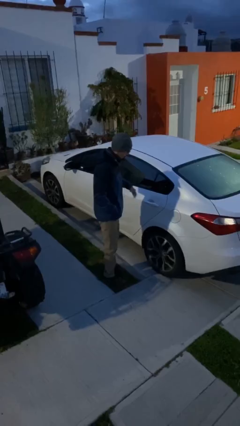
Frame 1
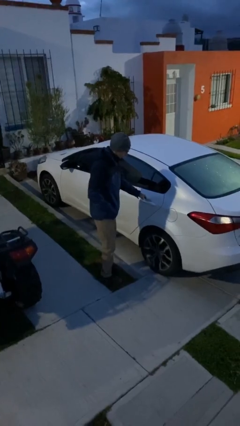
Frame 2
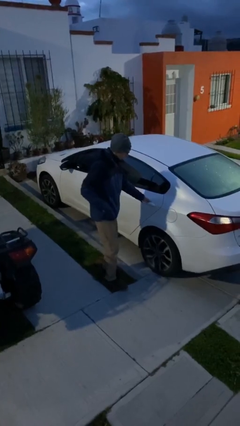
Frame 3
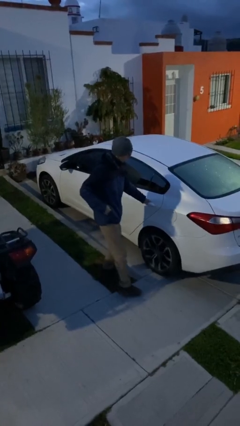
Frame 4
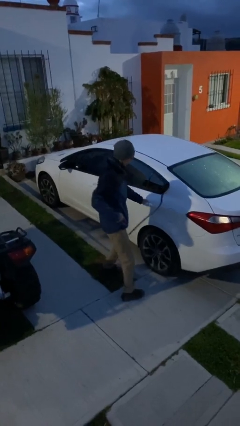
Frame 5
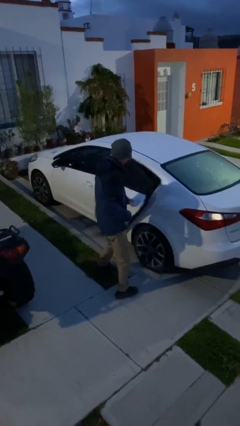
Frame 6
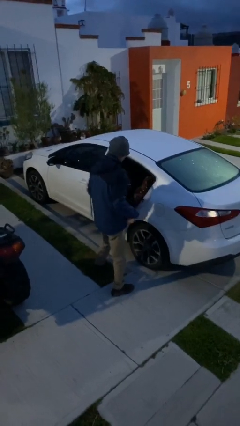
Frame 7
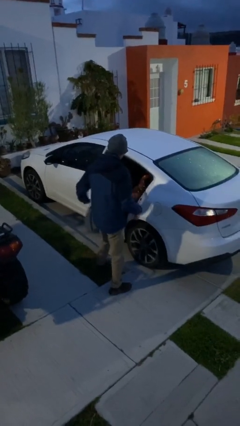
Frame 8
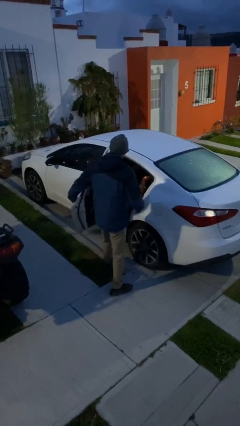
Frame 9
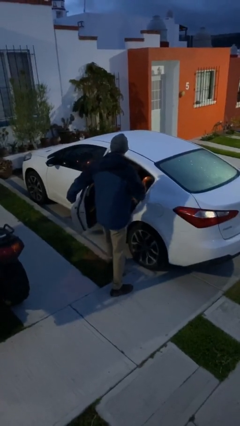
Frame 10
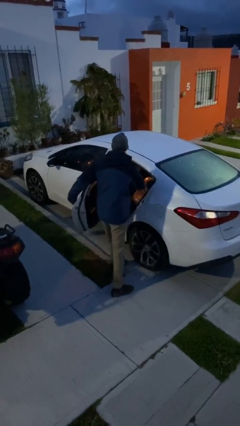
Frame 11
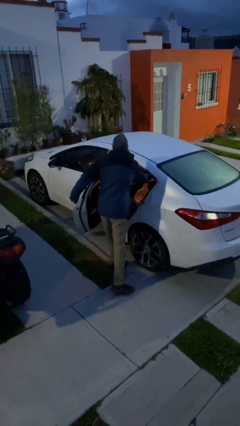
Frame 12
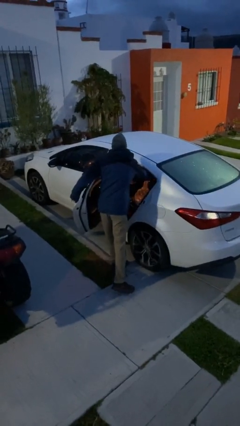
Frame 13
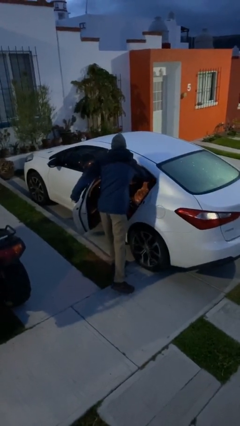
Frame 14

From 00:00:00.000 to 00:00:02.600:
person opens car door

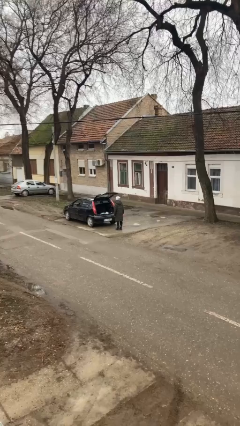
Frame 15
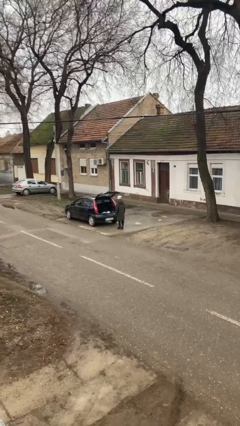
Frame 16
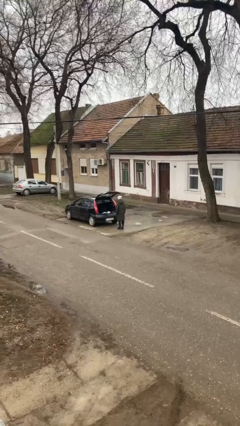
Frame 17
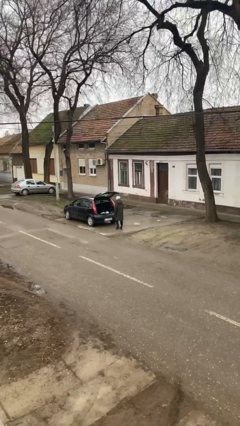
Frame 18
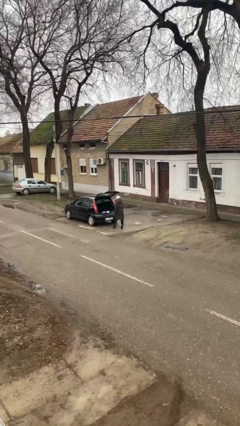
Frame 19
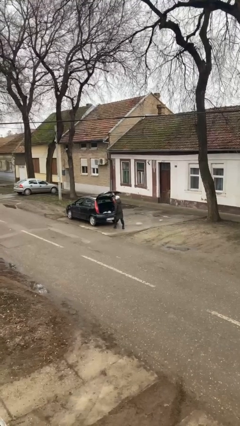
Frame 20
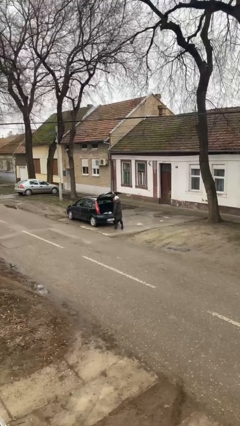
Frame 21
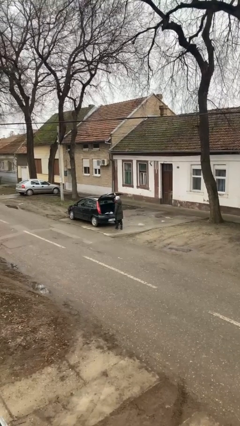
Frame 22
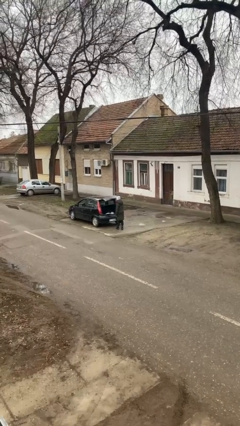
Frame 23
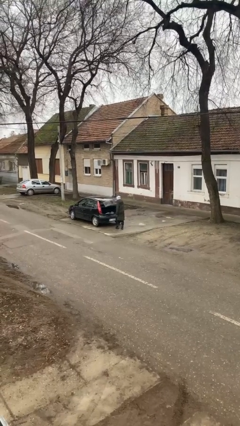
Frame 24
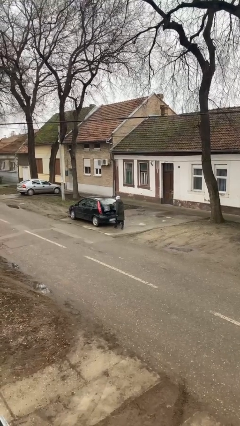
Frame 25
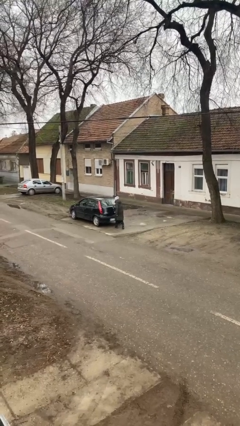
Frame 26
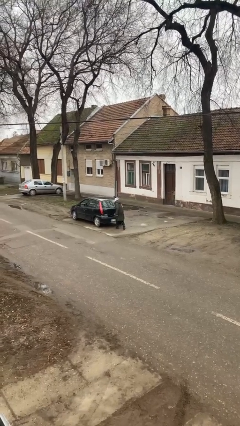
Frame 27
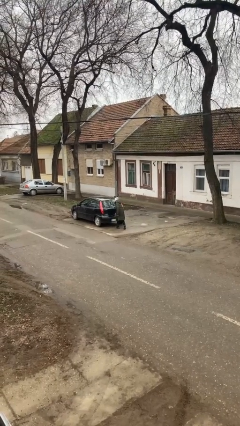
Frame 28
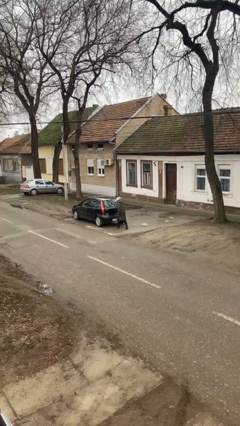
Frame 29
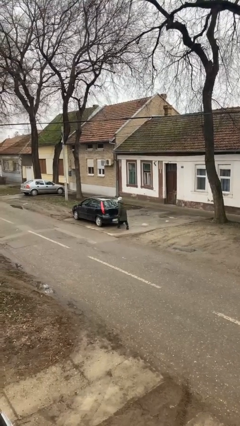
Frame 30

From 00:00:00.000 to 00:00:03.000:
person closes car trunk

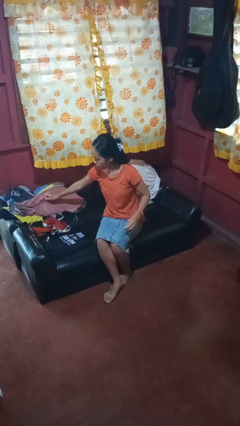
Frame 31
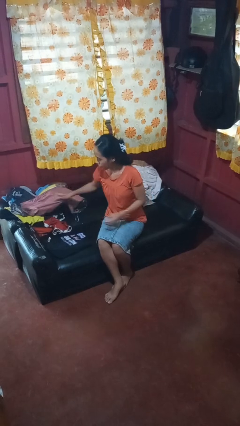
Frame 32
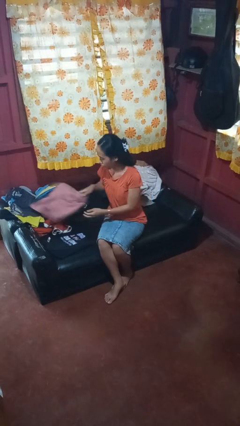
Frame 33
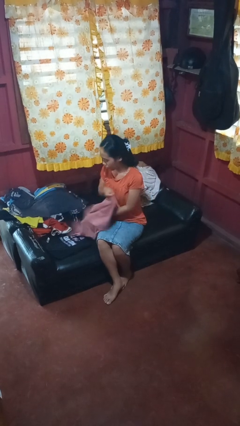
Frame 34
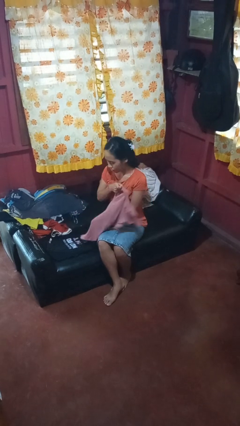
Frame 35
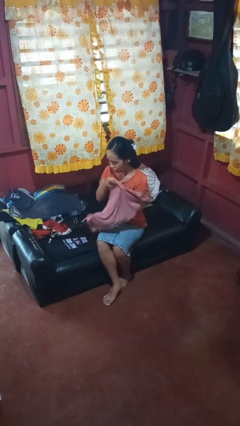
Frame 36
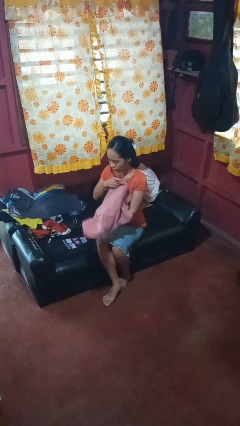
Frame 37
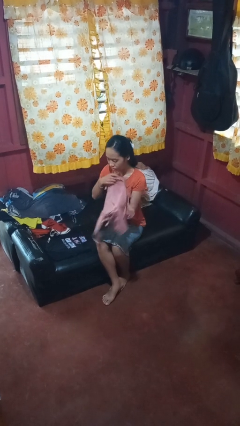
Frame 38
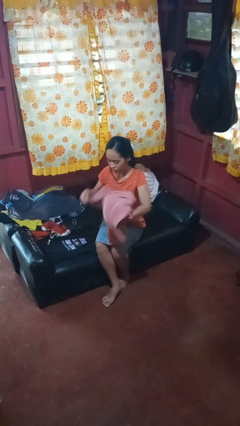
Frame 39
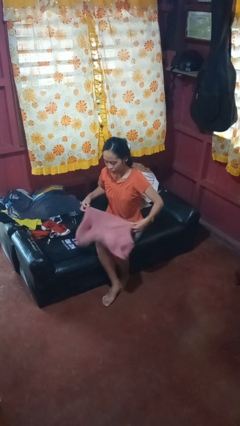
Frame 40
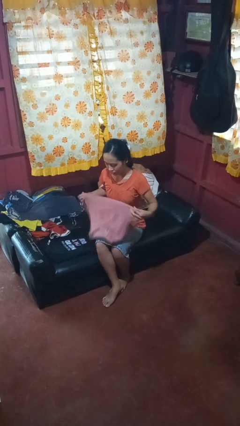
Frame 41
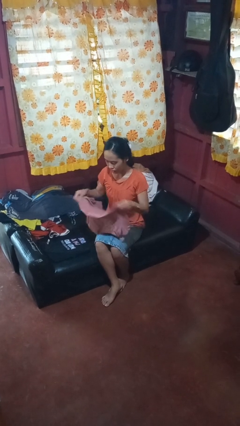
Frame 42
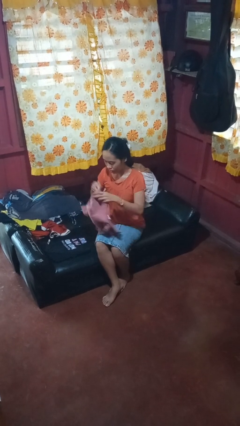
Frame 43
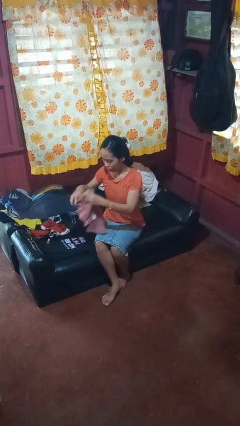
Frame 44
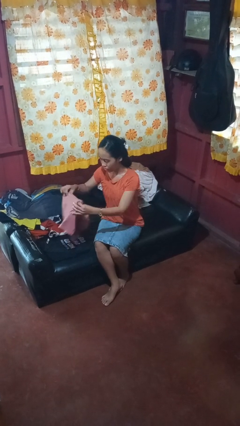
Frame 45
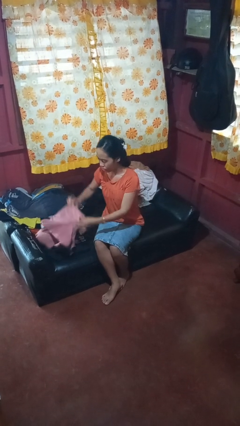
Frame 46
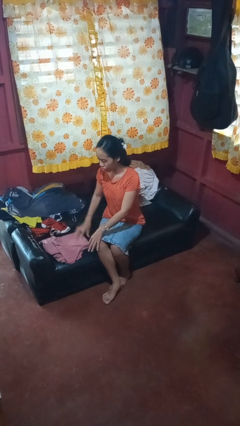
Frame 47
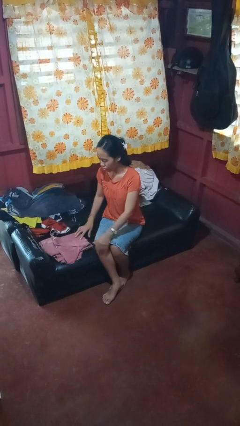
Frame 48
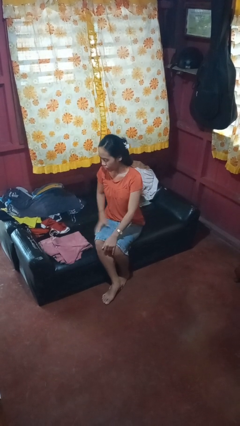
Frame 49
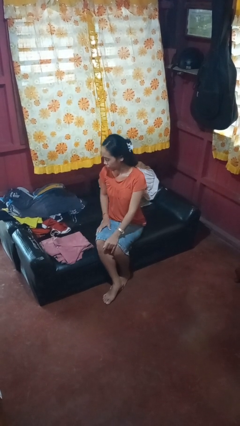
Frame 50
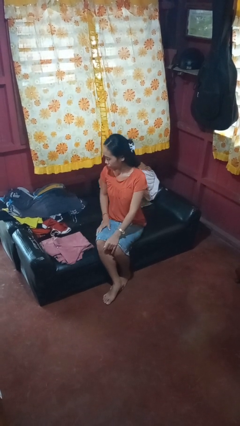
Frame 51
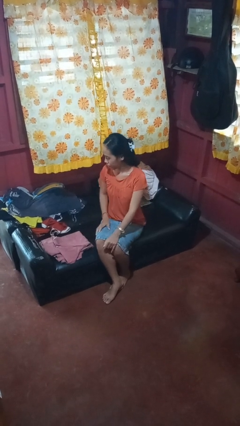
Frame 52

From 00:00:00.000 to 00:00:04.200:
person folds shirt

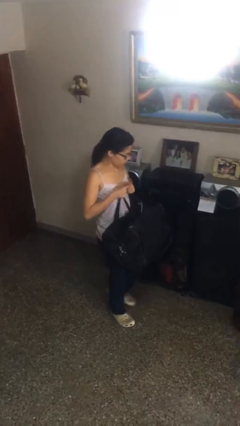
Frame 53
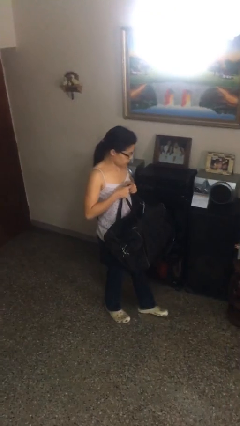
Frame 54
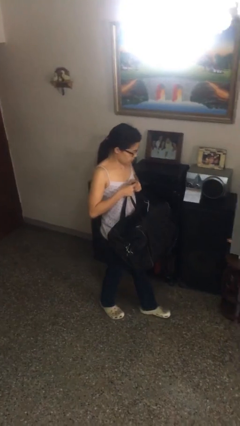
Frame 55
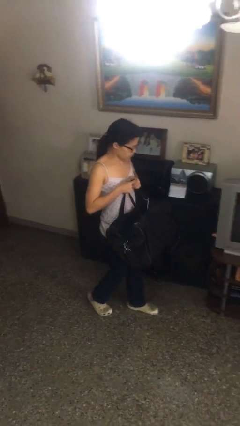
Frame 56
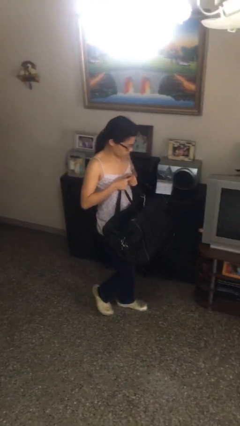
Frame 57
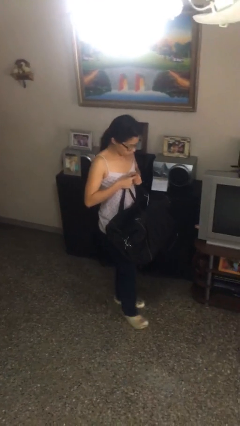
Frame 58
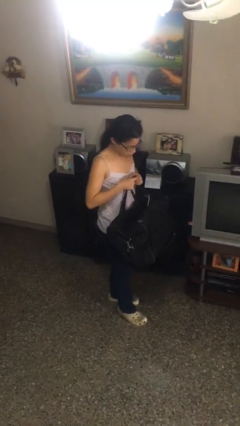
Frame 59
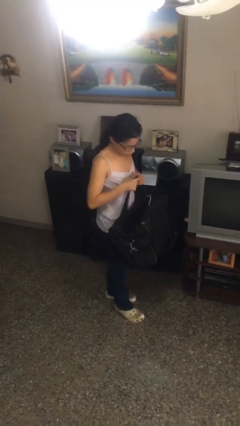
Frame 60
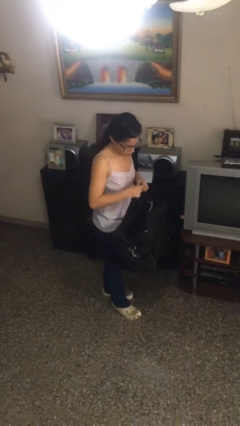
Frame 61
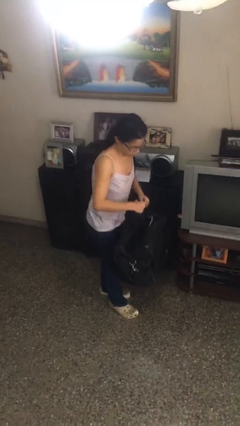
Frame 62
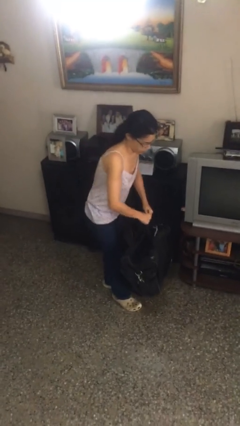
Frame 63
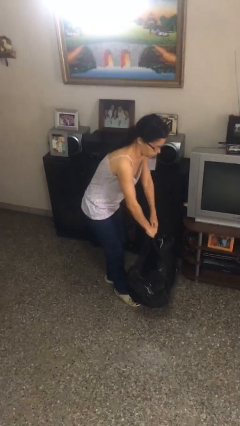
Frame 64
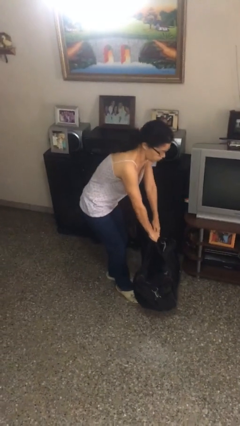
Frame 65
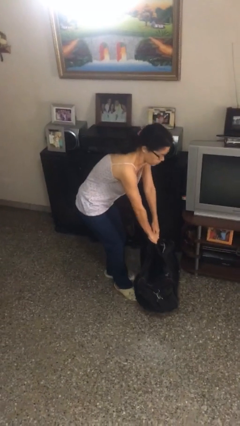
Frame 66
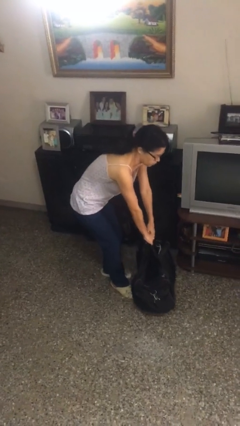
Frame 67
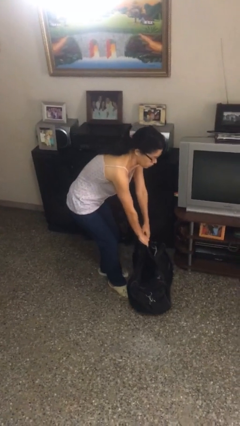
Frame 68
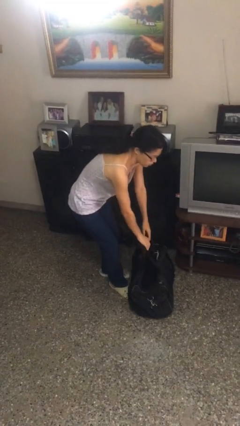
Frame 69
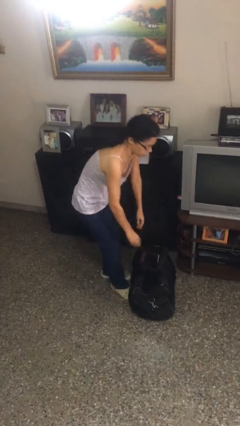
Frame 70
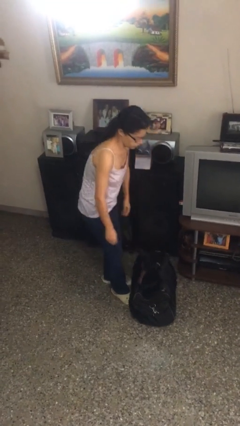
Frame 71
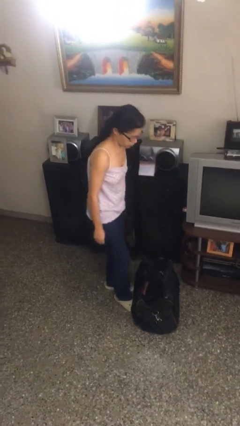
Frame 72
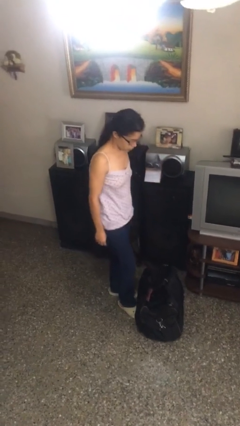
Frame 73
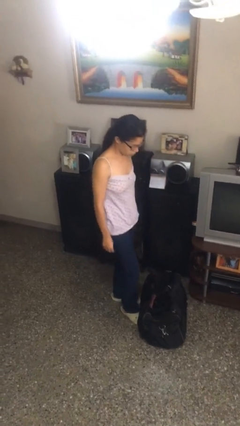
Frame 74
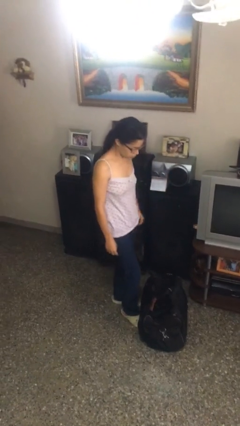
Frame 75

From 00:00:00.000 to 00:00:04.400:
person puts down object on floor

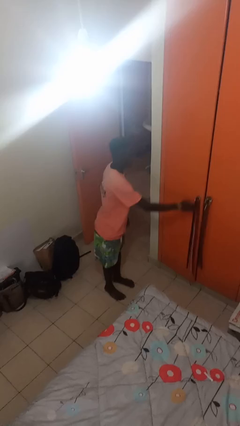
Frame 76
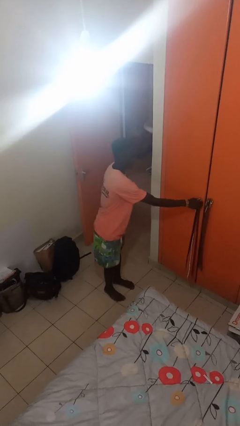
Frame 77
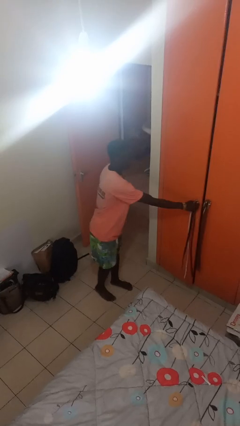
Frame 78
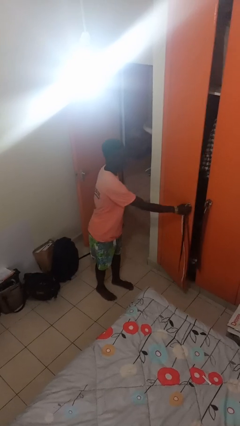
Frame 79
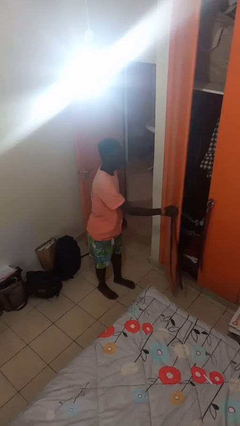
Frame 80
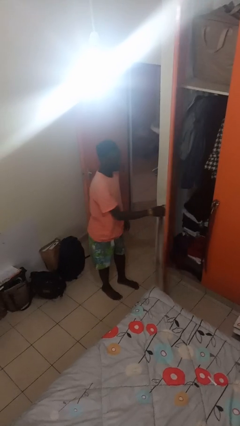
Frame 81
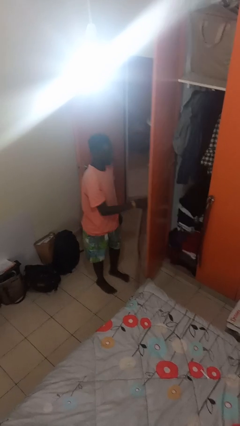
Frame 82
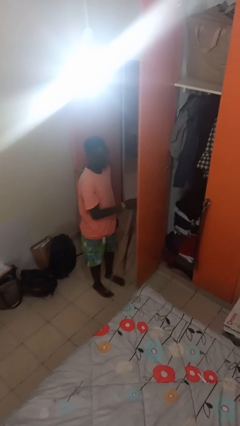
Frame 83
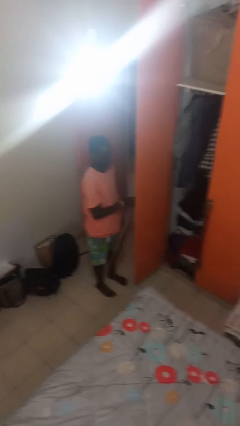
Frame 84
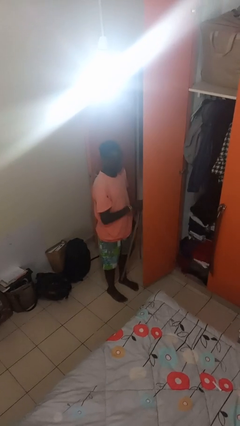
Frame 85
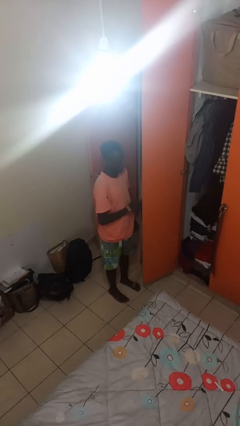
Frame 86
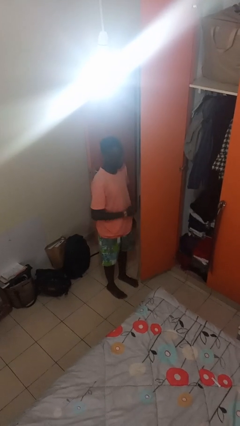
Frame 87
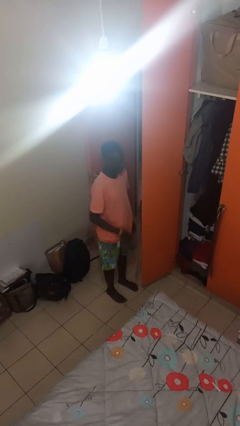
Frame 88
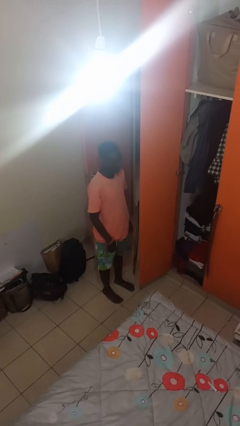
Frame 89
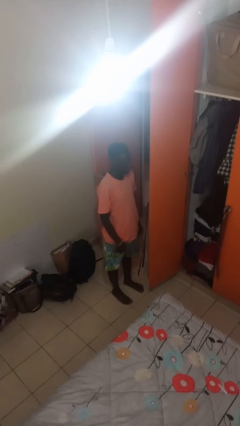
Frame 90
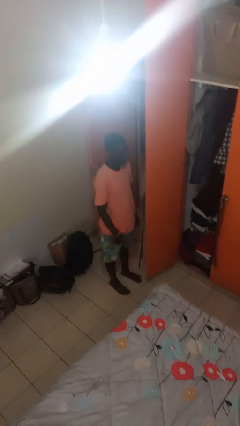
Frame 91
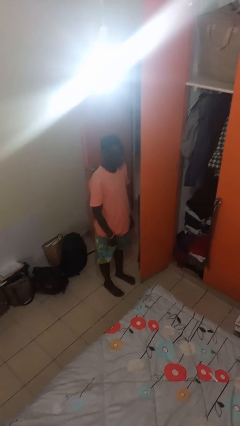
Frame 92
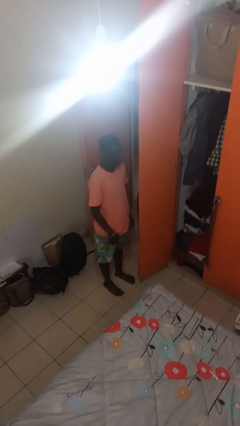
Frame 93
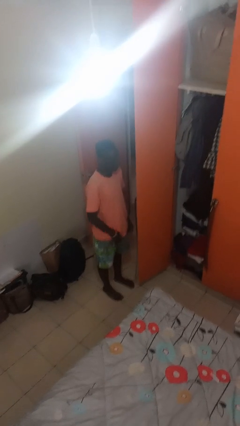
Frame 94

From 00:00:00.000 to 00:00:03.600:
person opens closet door
